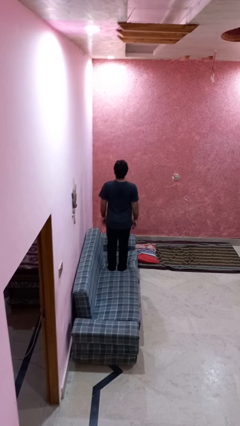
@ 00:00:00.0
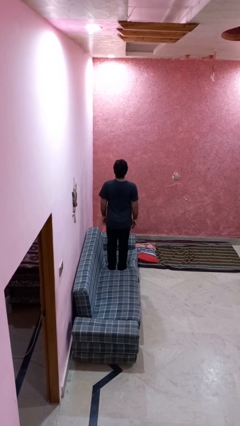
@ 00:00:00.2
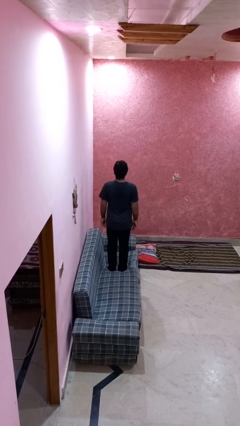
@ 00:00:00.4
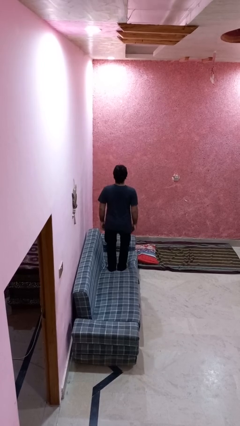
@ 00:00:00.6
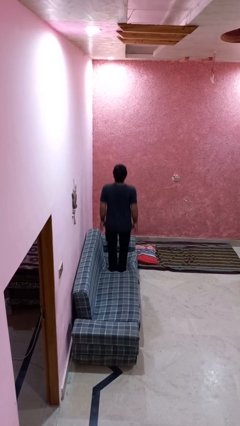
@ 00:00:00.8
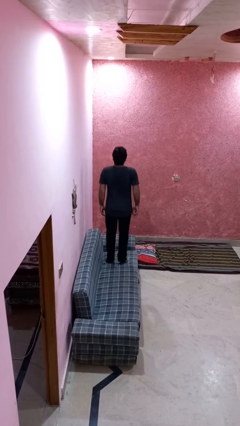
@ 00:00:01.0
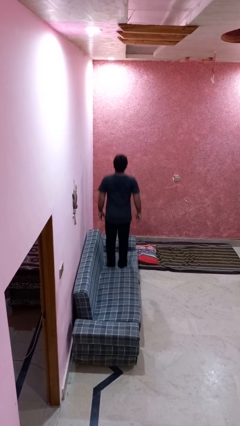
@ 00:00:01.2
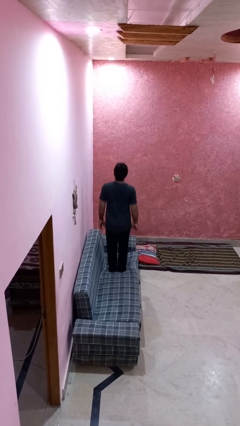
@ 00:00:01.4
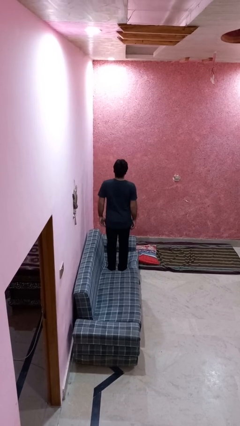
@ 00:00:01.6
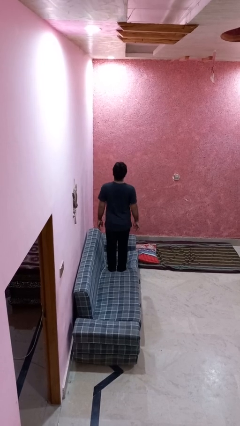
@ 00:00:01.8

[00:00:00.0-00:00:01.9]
person jumps on couch

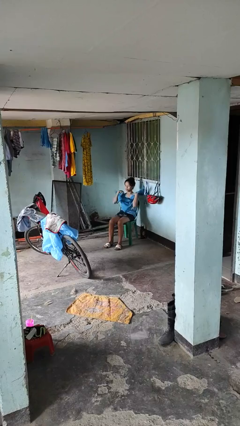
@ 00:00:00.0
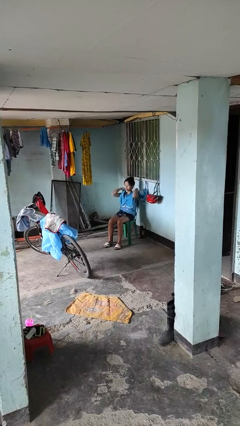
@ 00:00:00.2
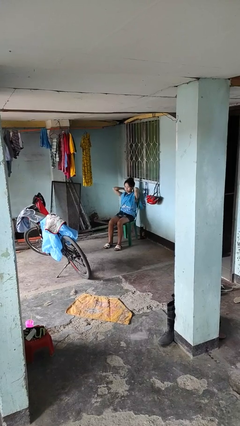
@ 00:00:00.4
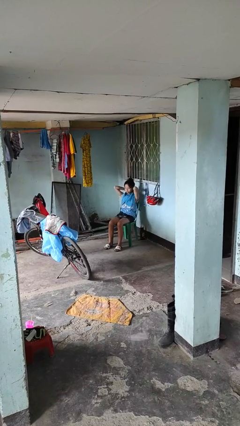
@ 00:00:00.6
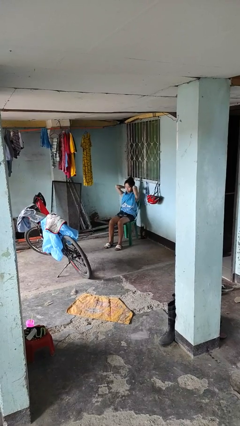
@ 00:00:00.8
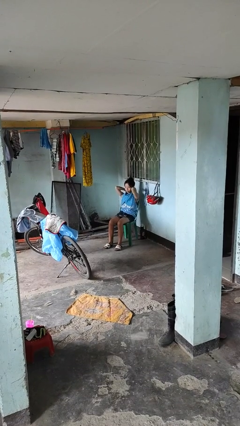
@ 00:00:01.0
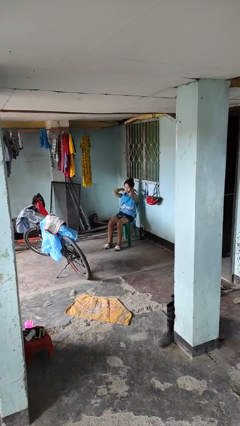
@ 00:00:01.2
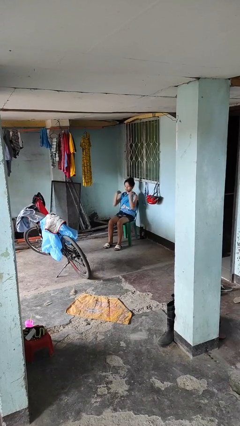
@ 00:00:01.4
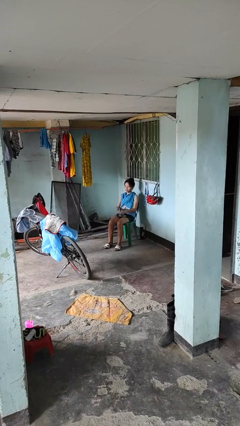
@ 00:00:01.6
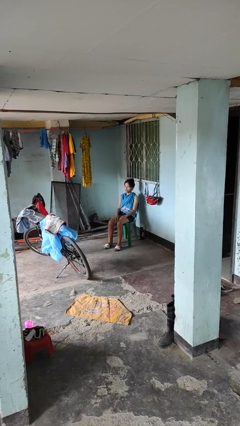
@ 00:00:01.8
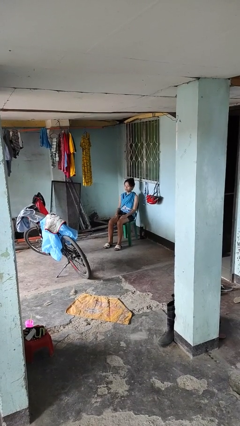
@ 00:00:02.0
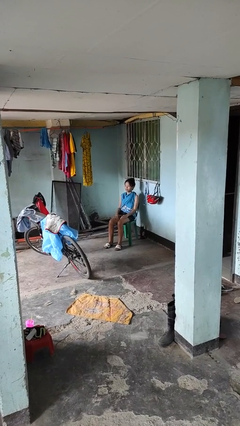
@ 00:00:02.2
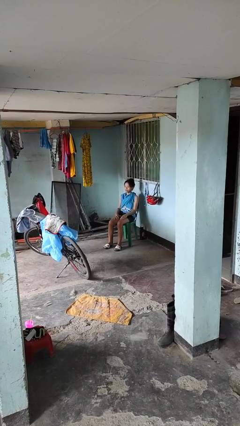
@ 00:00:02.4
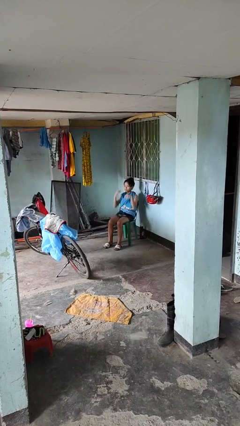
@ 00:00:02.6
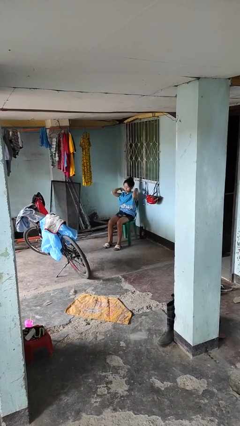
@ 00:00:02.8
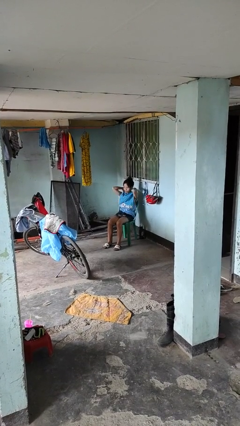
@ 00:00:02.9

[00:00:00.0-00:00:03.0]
person puts on scarf

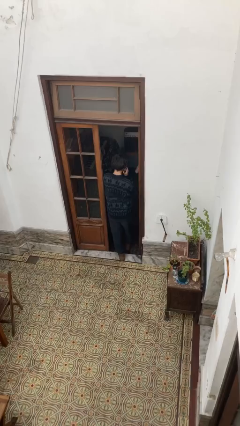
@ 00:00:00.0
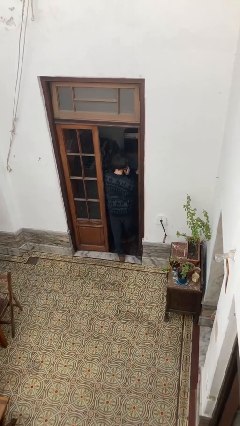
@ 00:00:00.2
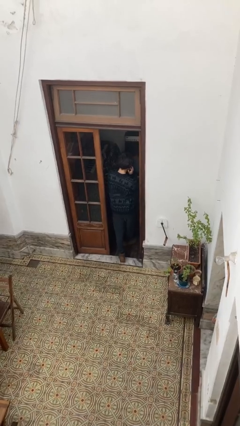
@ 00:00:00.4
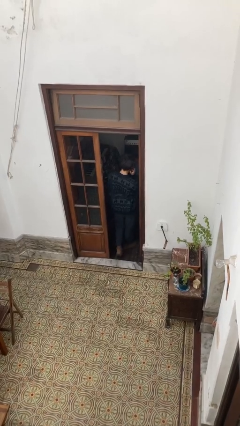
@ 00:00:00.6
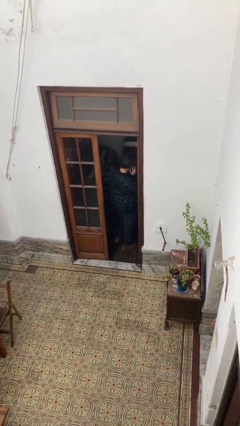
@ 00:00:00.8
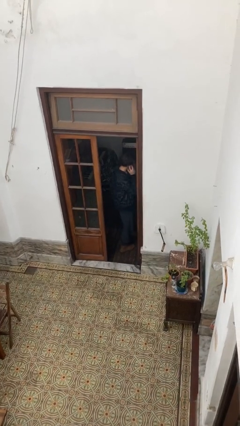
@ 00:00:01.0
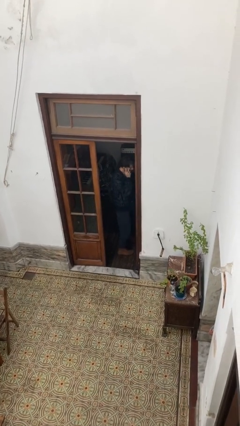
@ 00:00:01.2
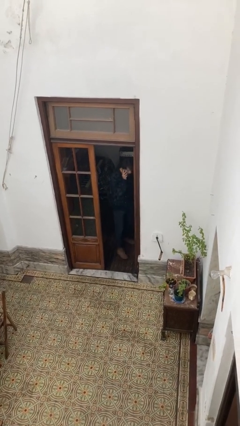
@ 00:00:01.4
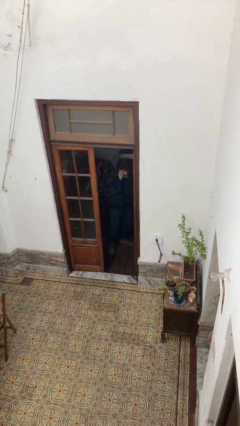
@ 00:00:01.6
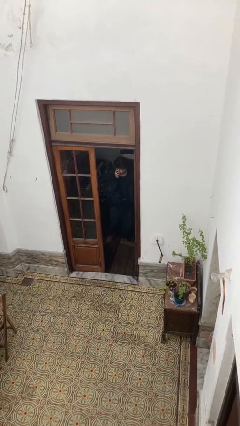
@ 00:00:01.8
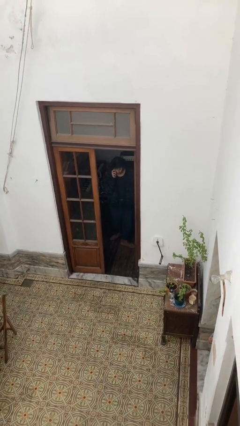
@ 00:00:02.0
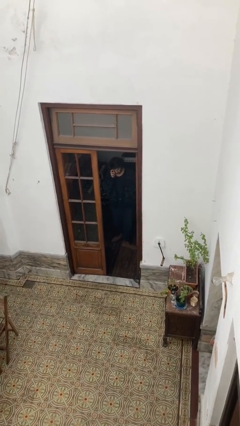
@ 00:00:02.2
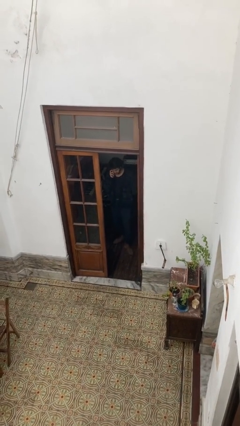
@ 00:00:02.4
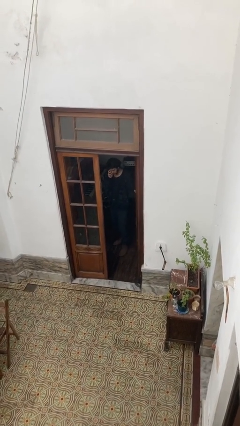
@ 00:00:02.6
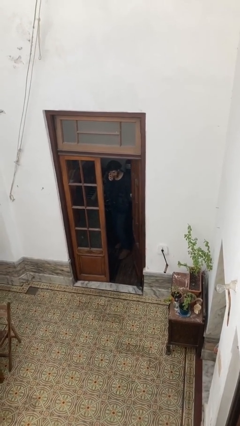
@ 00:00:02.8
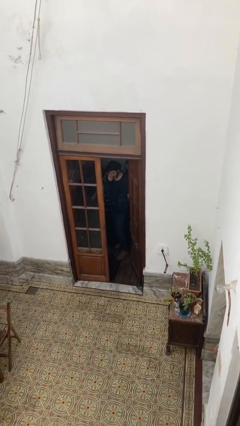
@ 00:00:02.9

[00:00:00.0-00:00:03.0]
person exits scene through structure

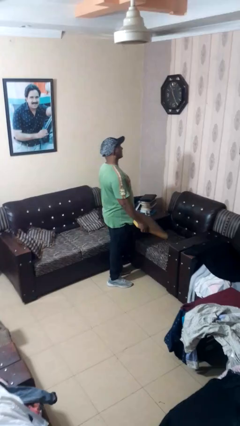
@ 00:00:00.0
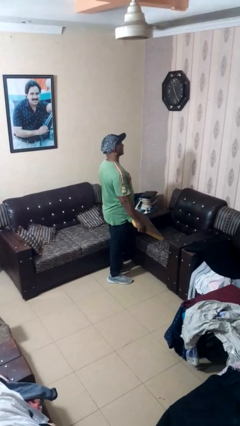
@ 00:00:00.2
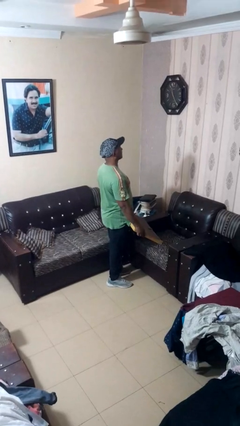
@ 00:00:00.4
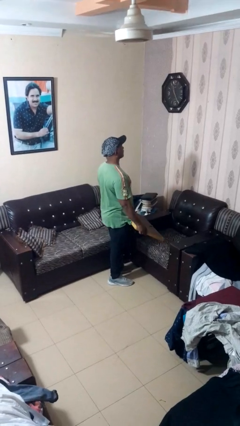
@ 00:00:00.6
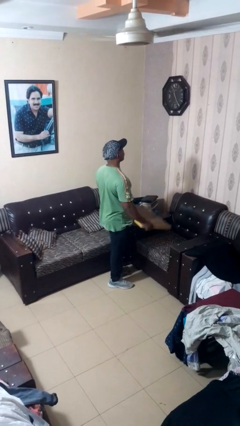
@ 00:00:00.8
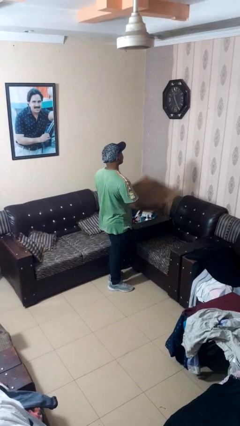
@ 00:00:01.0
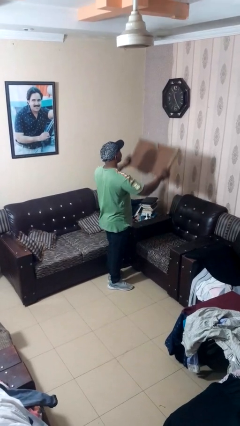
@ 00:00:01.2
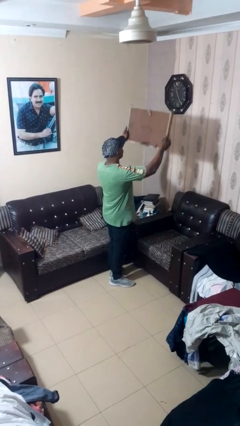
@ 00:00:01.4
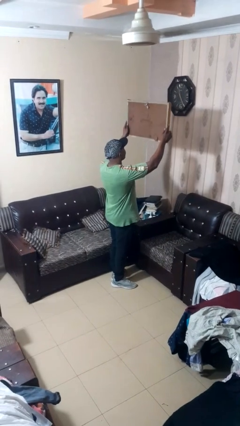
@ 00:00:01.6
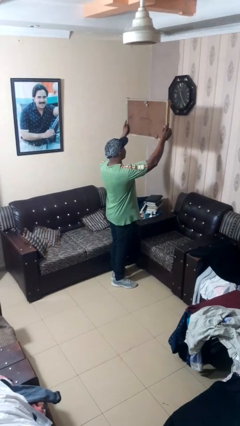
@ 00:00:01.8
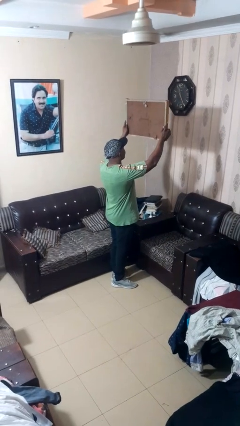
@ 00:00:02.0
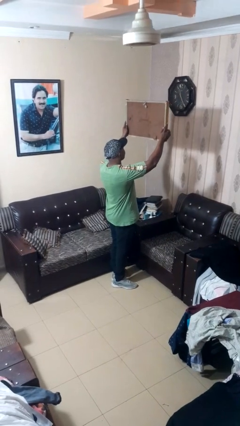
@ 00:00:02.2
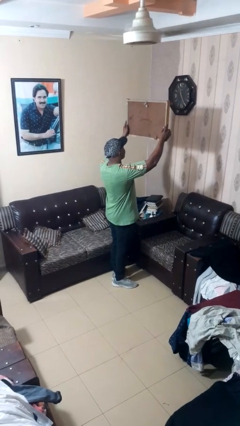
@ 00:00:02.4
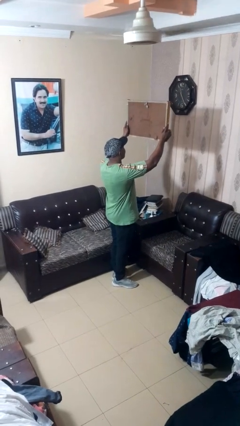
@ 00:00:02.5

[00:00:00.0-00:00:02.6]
person holds object above head

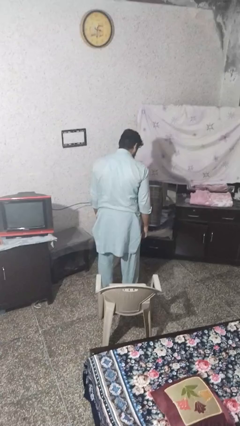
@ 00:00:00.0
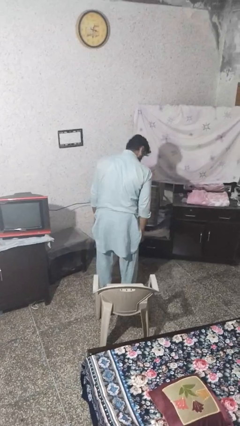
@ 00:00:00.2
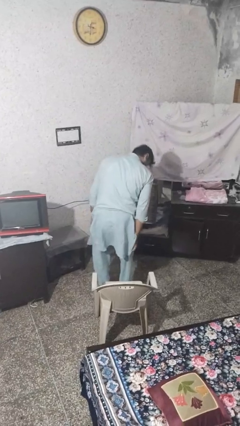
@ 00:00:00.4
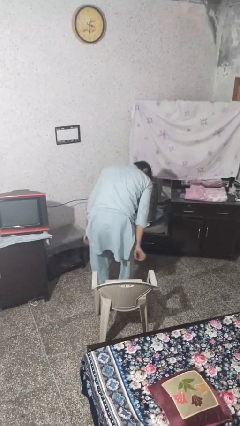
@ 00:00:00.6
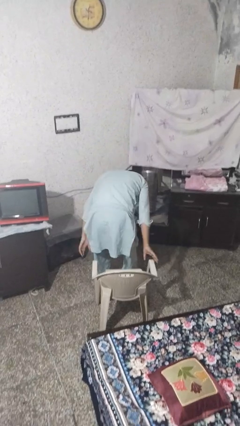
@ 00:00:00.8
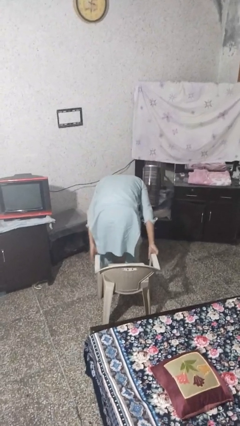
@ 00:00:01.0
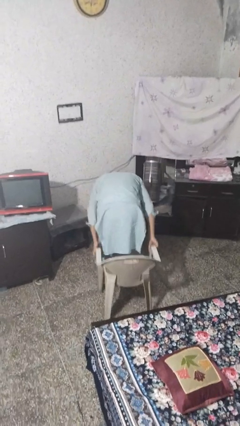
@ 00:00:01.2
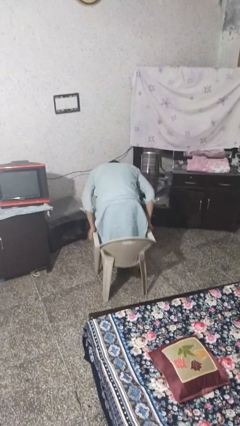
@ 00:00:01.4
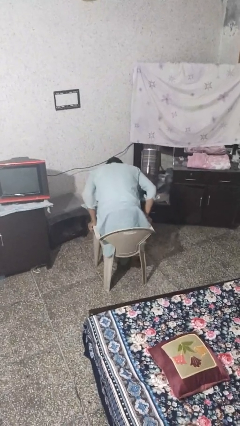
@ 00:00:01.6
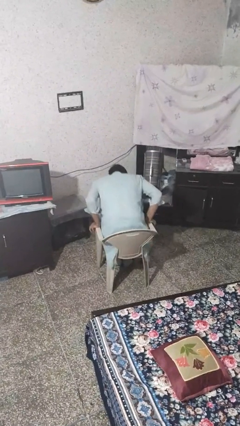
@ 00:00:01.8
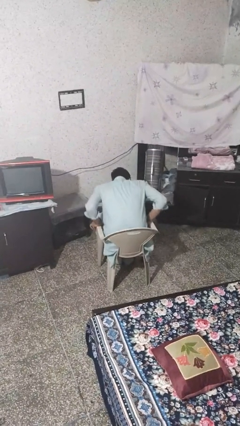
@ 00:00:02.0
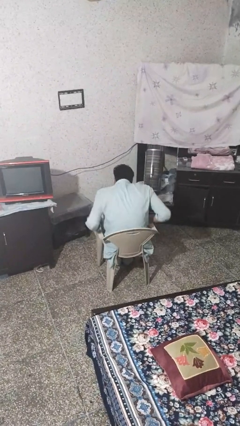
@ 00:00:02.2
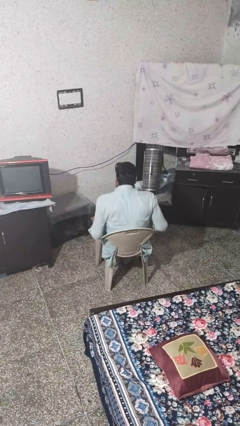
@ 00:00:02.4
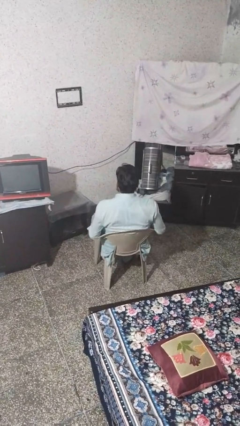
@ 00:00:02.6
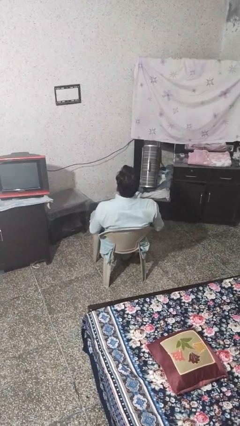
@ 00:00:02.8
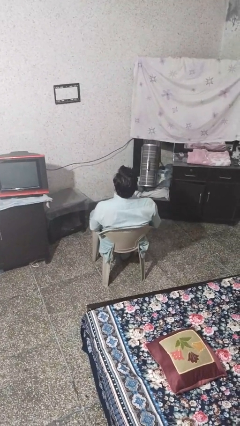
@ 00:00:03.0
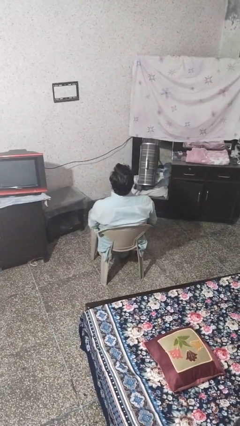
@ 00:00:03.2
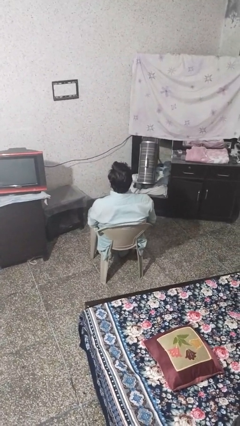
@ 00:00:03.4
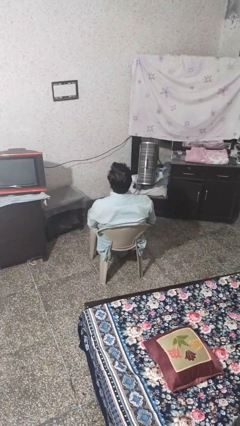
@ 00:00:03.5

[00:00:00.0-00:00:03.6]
person sits down

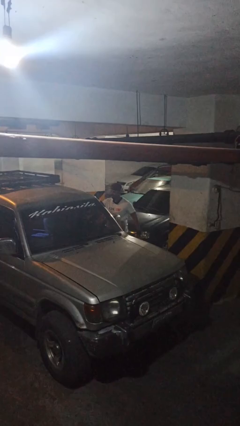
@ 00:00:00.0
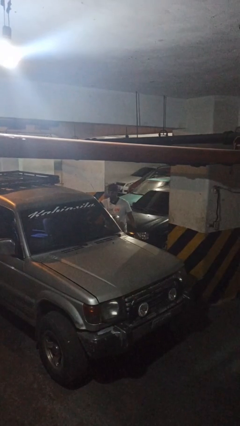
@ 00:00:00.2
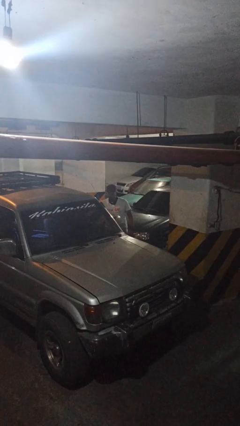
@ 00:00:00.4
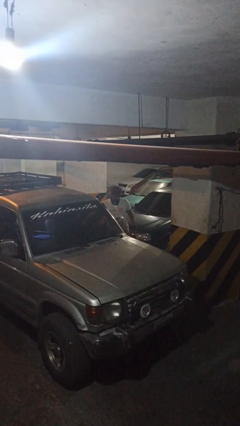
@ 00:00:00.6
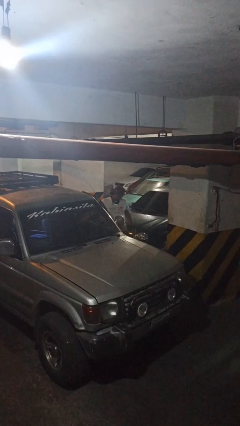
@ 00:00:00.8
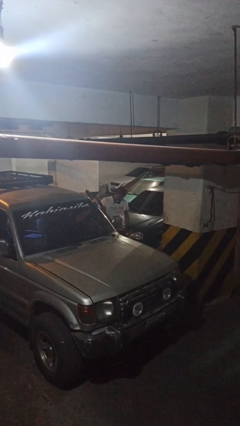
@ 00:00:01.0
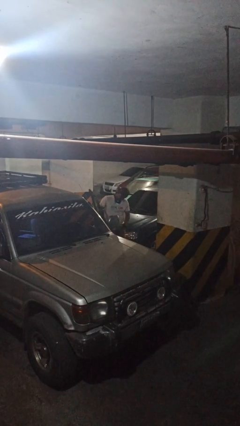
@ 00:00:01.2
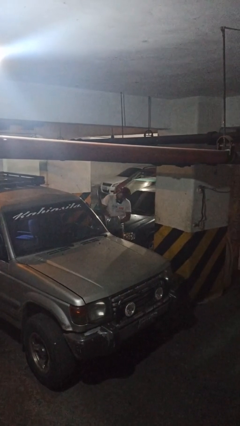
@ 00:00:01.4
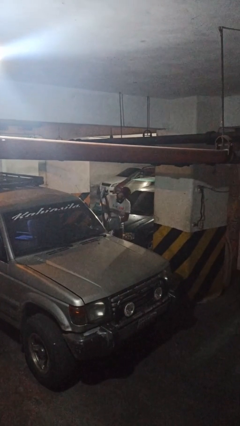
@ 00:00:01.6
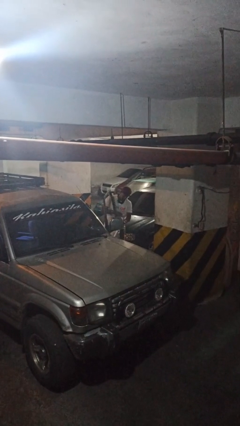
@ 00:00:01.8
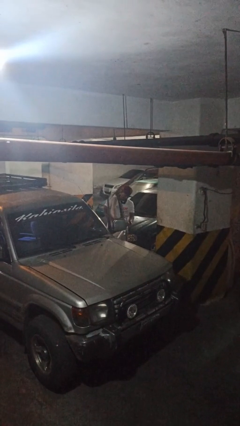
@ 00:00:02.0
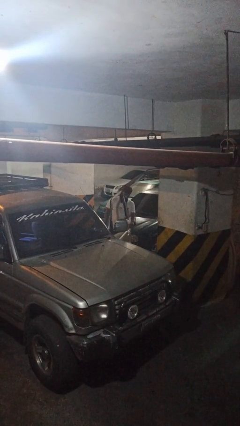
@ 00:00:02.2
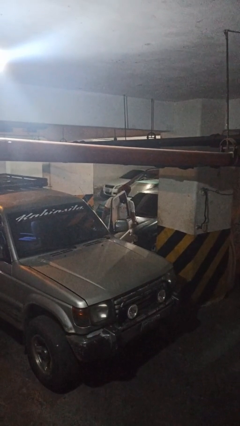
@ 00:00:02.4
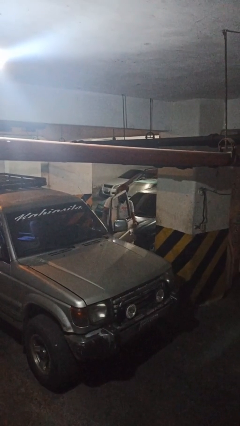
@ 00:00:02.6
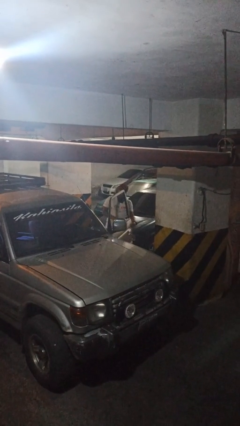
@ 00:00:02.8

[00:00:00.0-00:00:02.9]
person opens car door

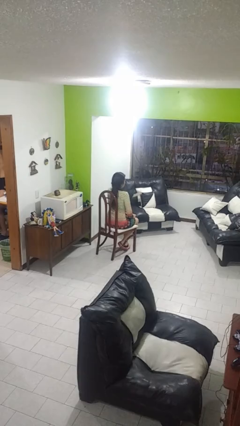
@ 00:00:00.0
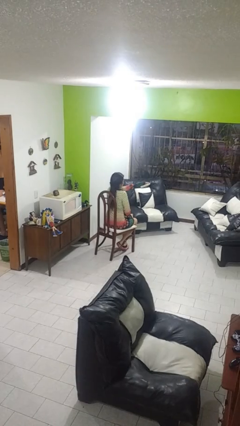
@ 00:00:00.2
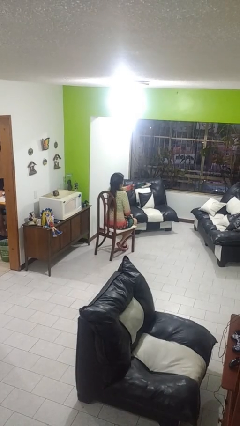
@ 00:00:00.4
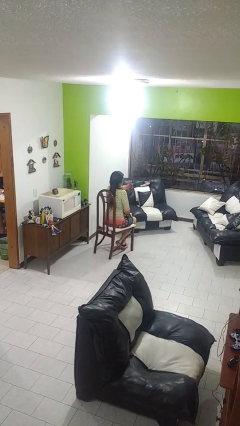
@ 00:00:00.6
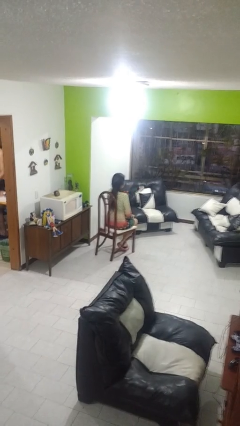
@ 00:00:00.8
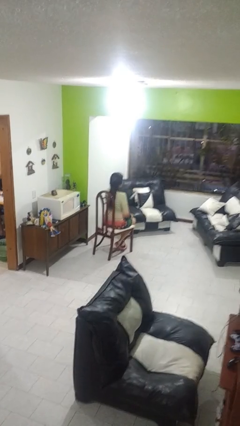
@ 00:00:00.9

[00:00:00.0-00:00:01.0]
person uses television remote
